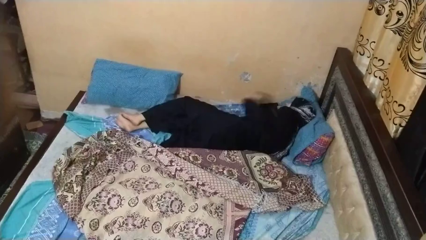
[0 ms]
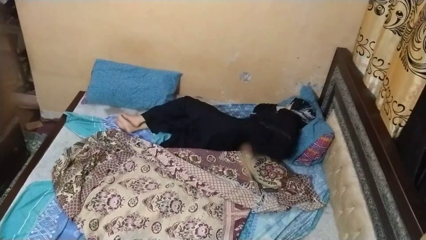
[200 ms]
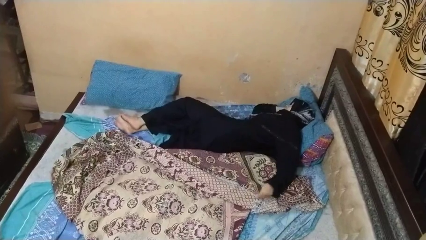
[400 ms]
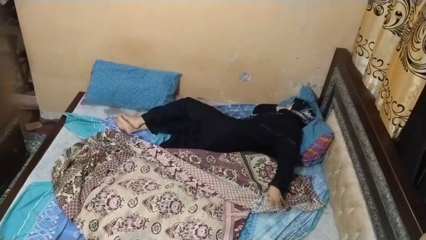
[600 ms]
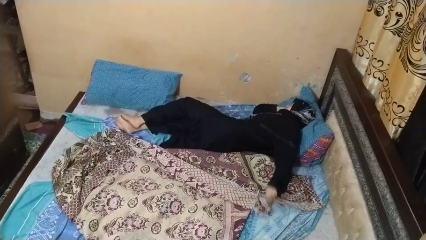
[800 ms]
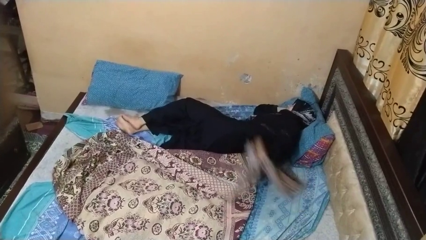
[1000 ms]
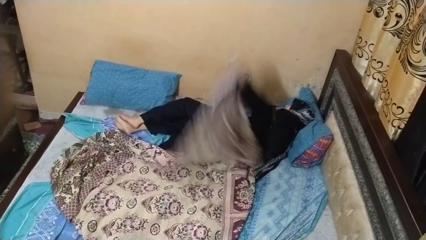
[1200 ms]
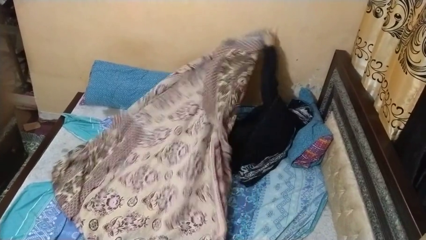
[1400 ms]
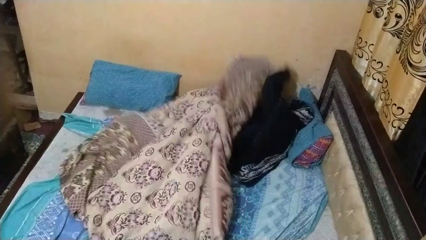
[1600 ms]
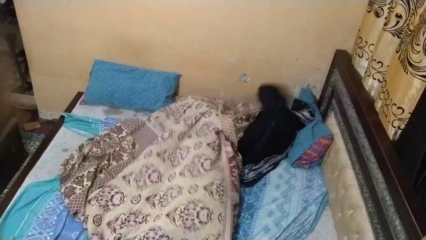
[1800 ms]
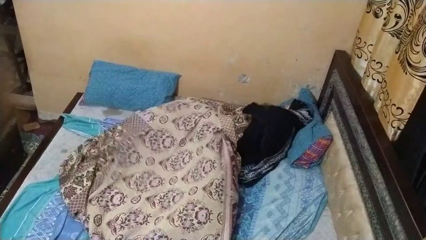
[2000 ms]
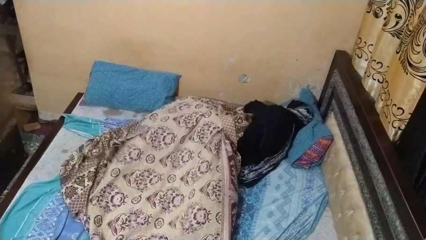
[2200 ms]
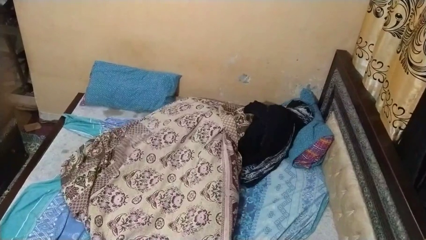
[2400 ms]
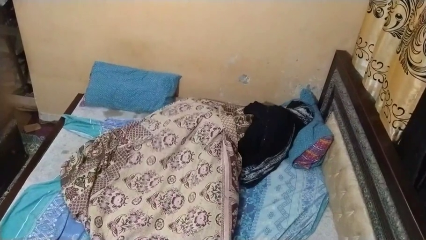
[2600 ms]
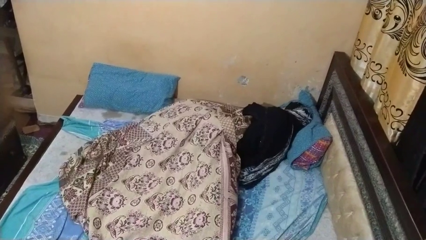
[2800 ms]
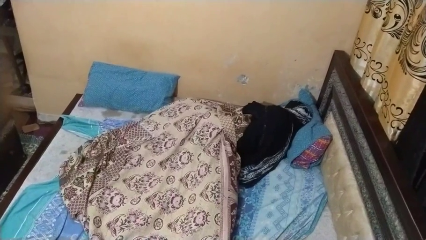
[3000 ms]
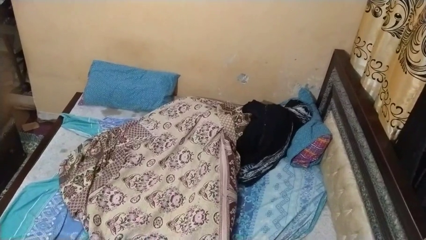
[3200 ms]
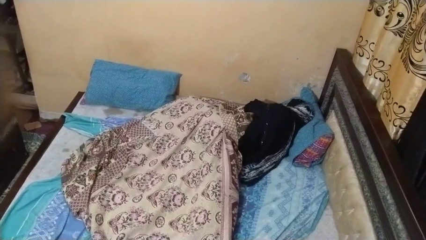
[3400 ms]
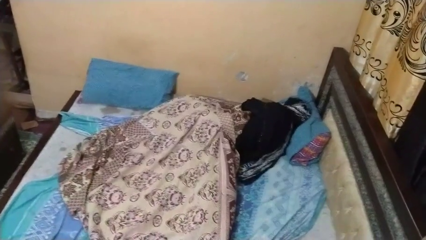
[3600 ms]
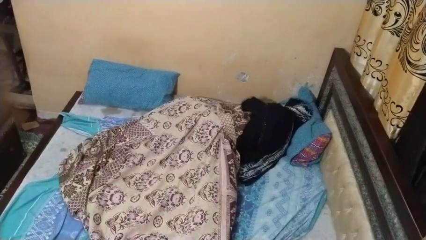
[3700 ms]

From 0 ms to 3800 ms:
person covers with blanket

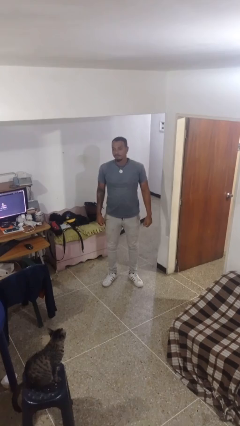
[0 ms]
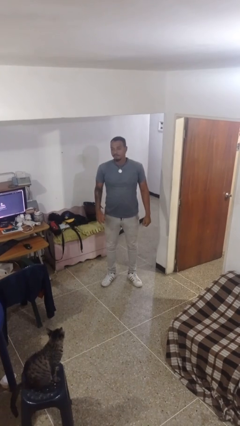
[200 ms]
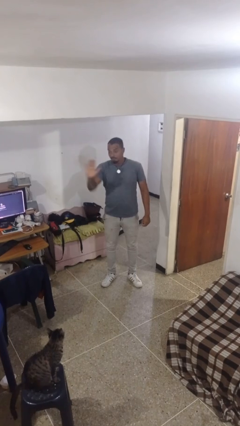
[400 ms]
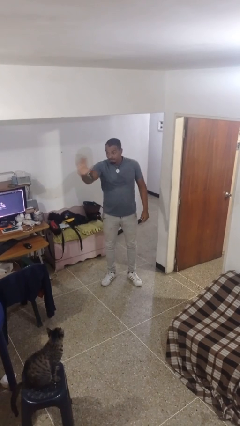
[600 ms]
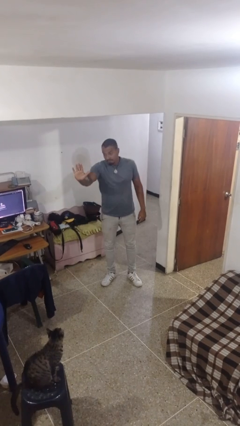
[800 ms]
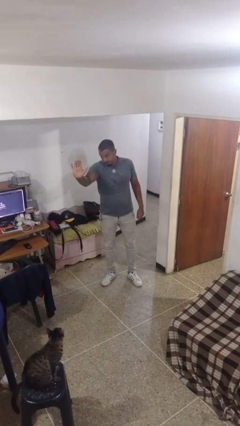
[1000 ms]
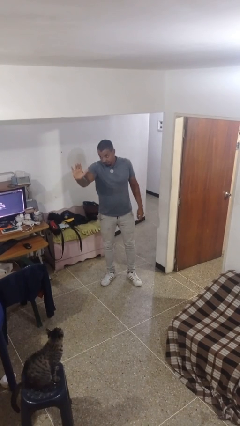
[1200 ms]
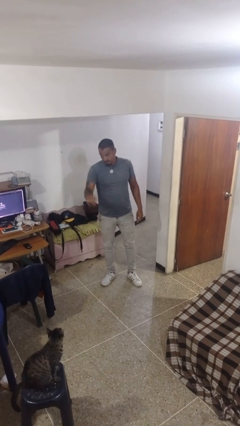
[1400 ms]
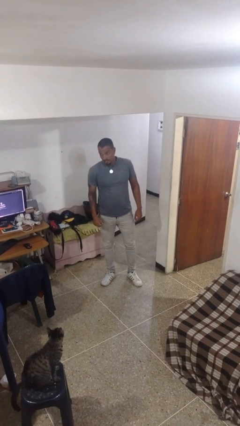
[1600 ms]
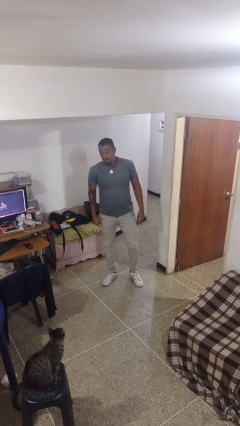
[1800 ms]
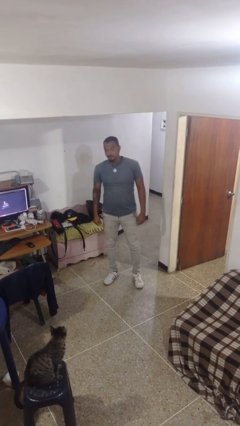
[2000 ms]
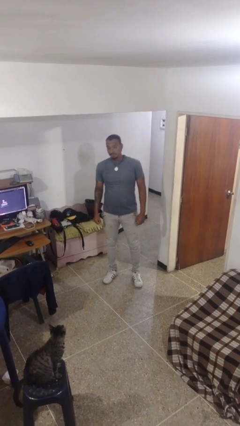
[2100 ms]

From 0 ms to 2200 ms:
person gestures stop

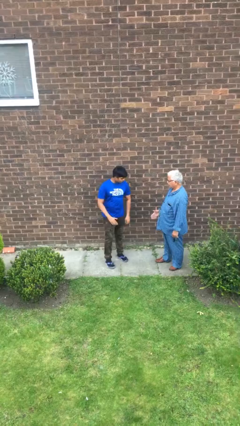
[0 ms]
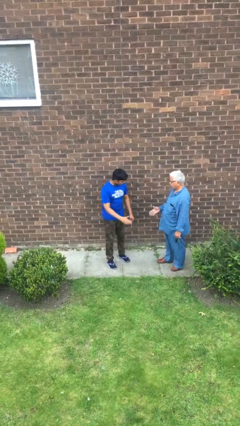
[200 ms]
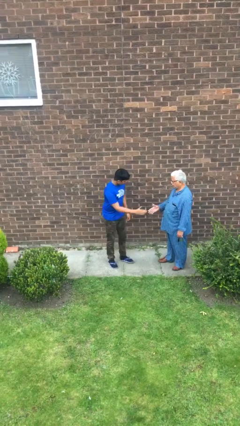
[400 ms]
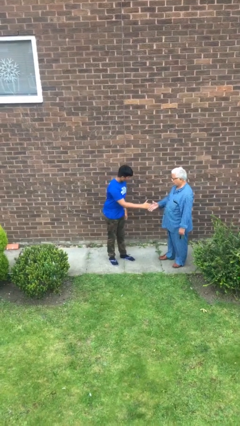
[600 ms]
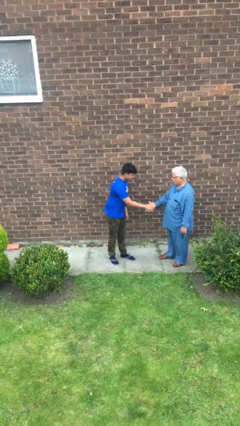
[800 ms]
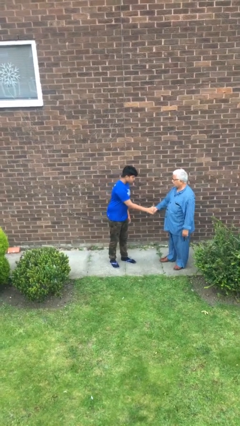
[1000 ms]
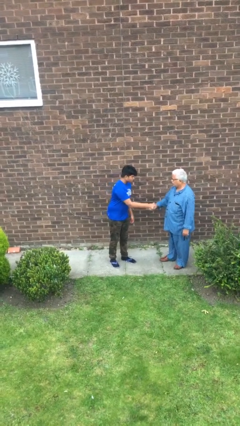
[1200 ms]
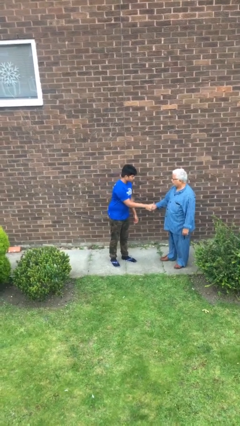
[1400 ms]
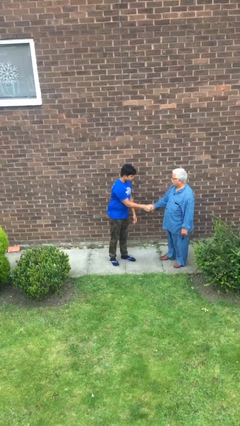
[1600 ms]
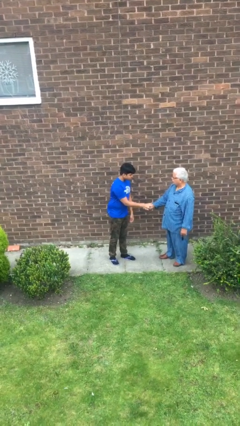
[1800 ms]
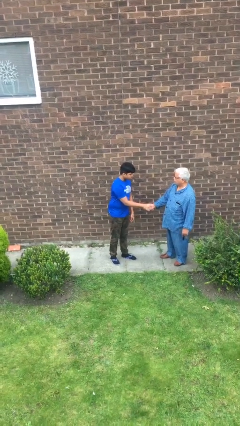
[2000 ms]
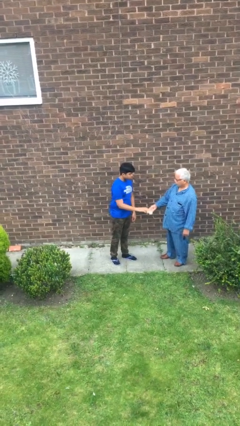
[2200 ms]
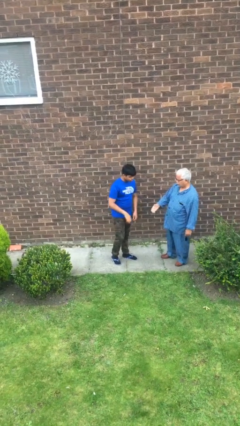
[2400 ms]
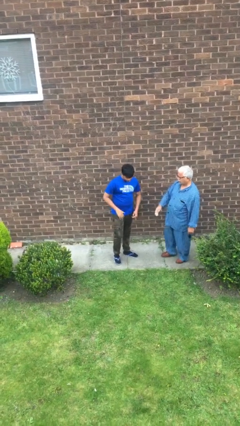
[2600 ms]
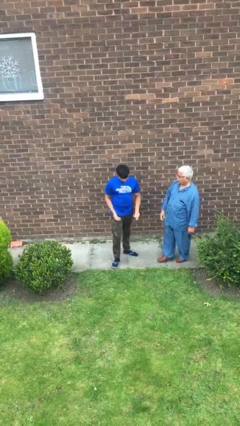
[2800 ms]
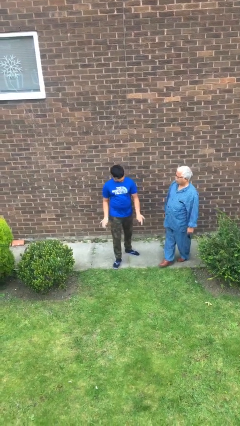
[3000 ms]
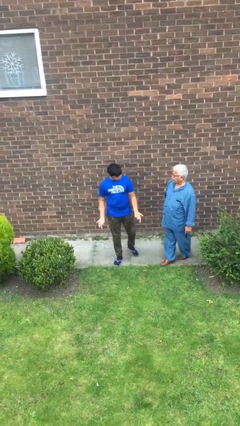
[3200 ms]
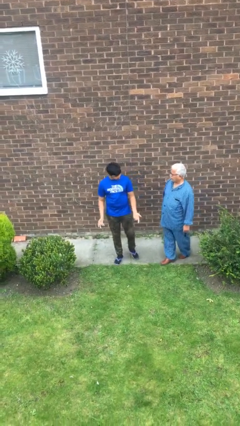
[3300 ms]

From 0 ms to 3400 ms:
person shakes hand

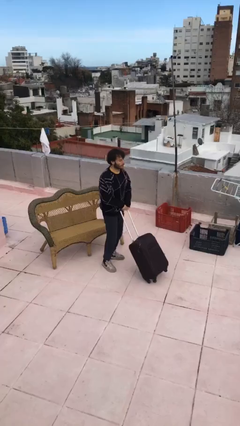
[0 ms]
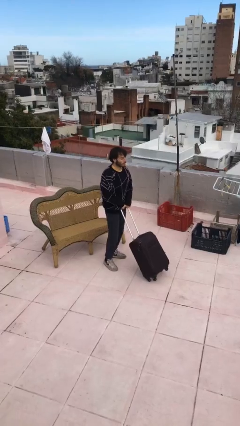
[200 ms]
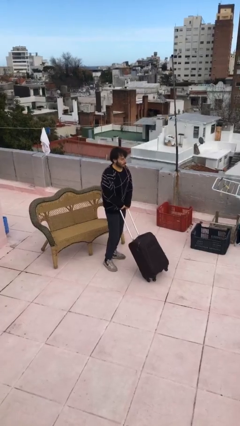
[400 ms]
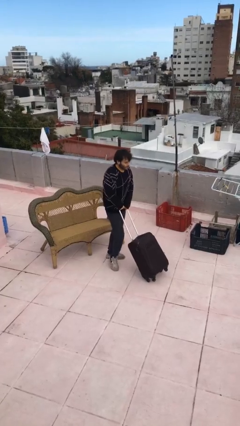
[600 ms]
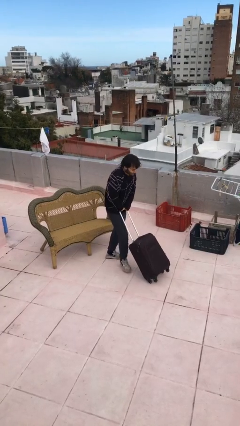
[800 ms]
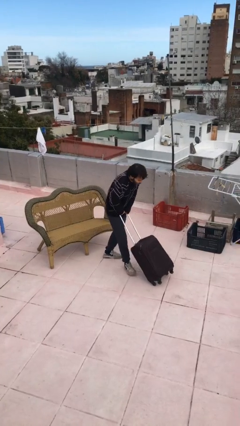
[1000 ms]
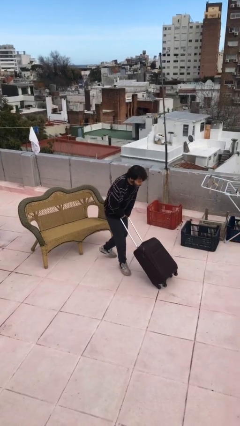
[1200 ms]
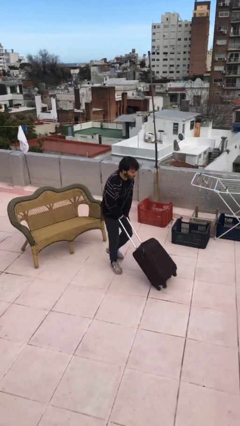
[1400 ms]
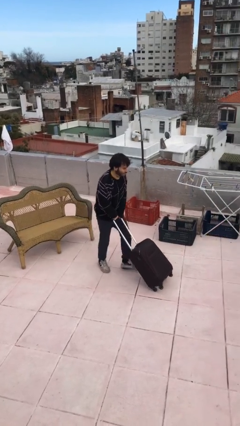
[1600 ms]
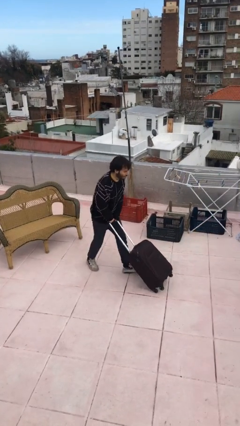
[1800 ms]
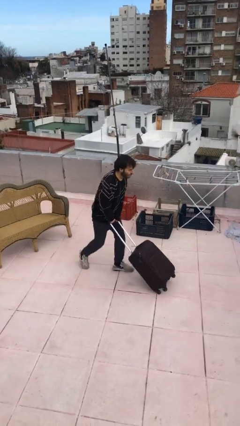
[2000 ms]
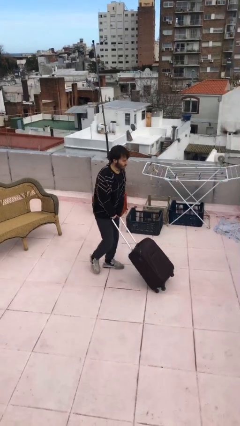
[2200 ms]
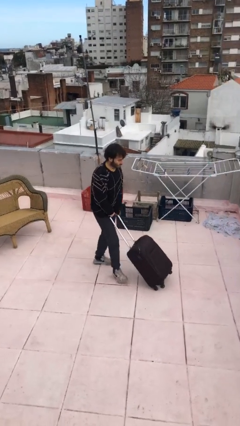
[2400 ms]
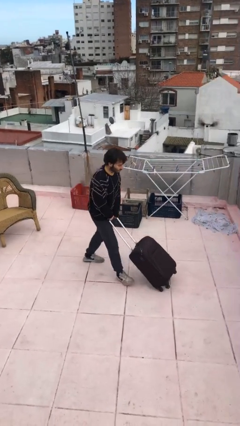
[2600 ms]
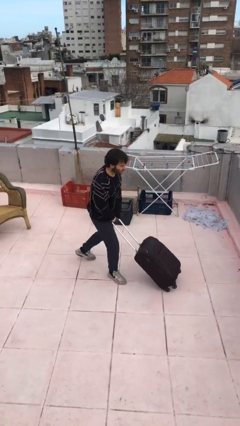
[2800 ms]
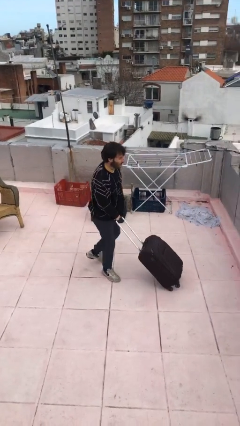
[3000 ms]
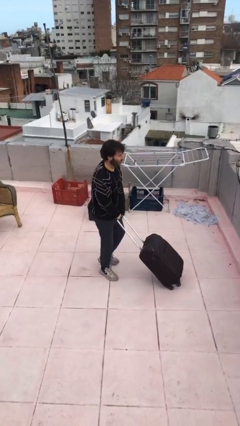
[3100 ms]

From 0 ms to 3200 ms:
person pushes wheeled cart

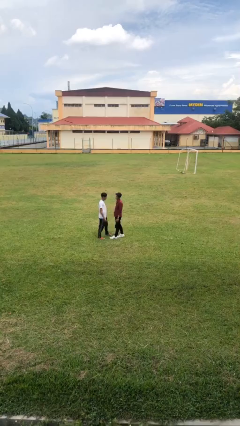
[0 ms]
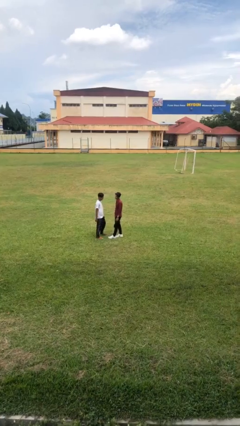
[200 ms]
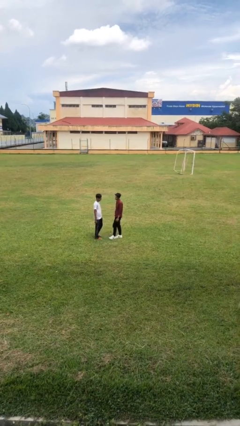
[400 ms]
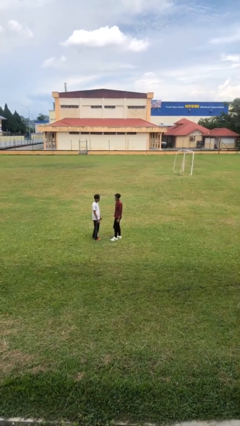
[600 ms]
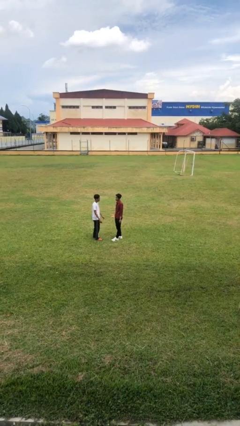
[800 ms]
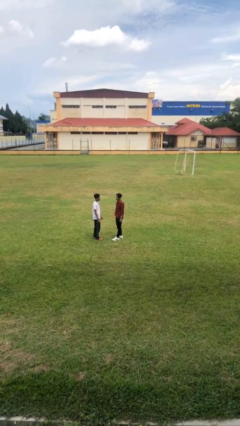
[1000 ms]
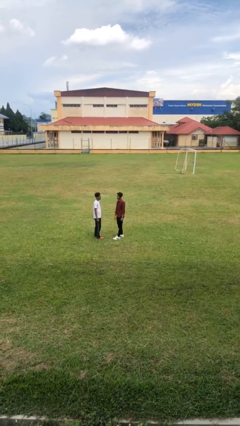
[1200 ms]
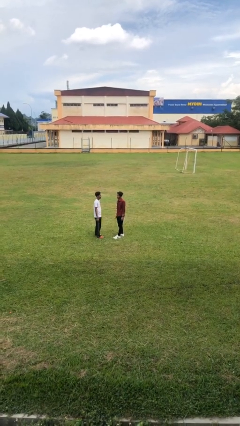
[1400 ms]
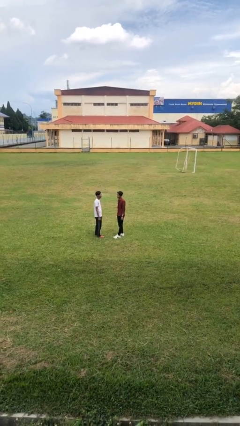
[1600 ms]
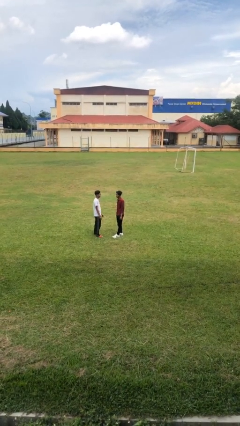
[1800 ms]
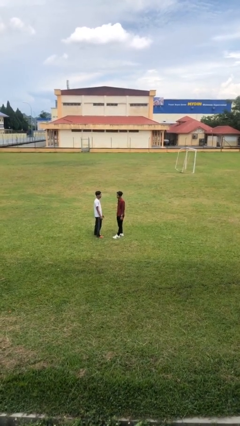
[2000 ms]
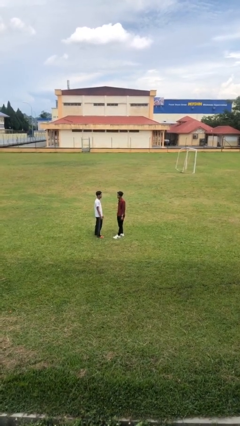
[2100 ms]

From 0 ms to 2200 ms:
person talks to person

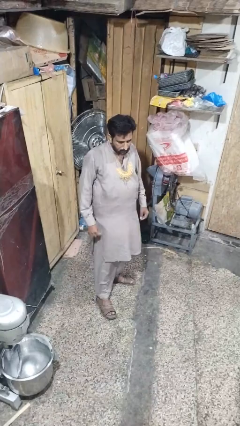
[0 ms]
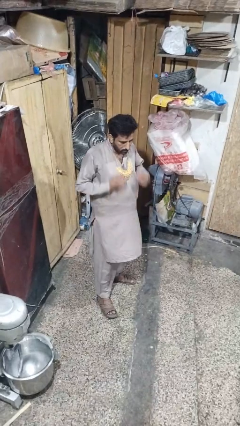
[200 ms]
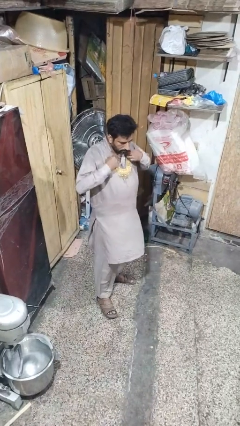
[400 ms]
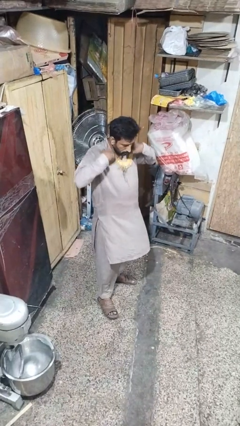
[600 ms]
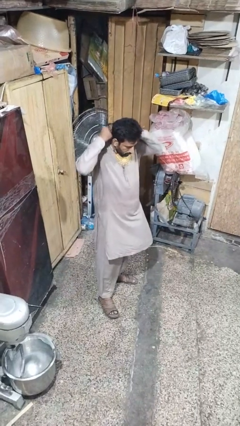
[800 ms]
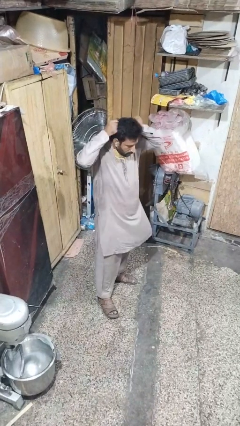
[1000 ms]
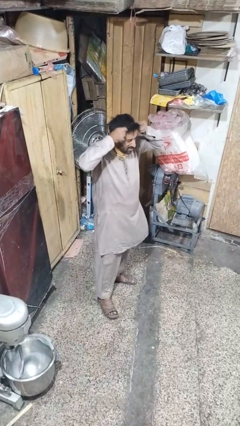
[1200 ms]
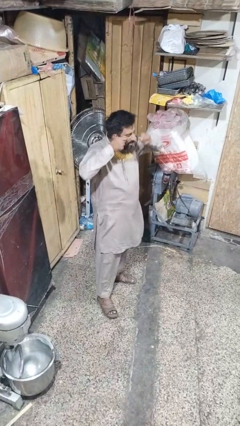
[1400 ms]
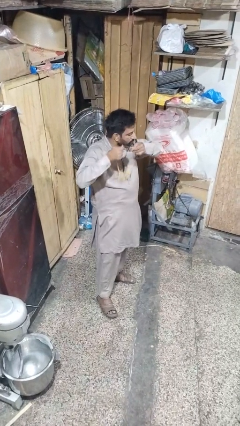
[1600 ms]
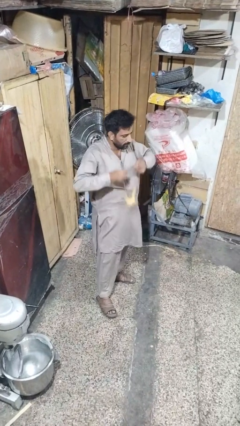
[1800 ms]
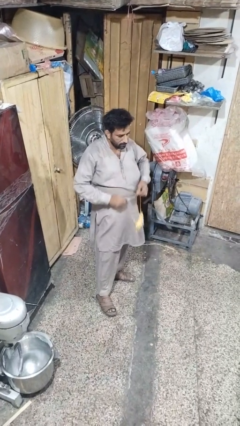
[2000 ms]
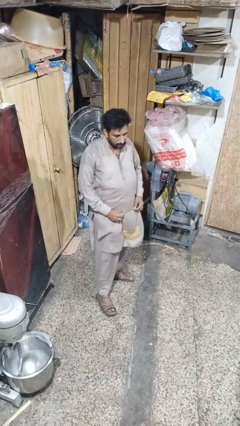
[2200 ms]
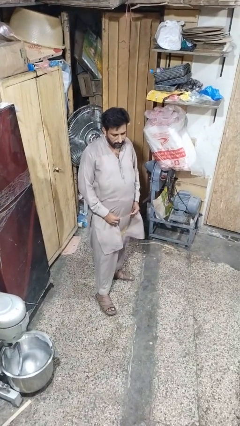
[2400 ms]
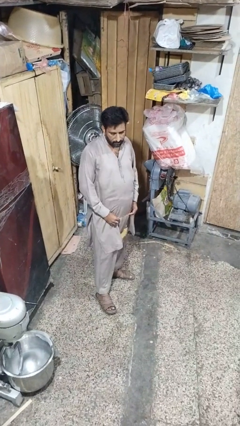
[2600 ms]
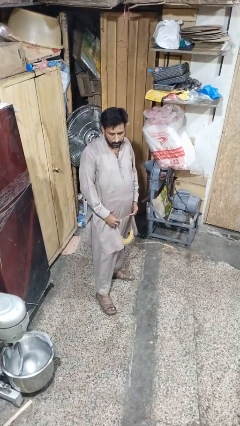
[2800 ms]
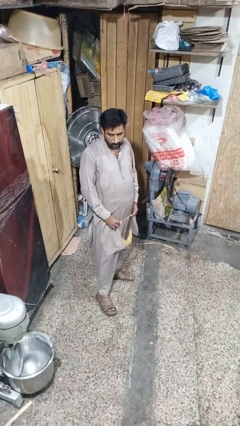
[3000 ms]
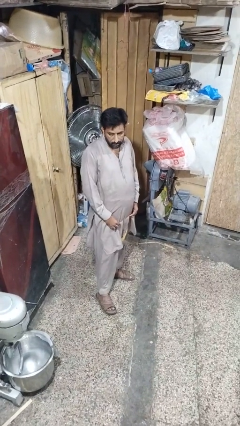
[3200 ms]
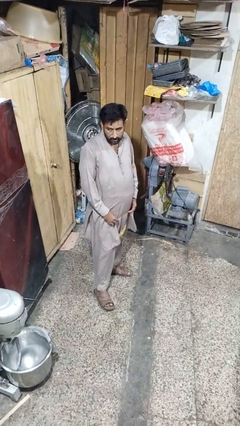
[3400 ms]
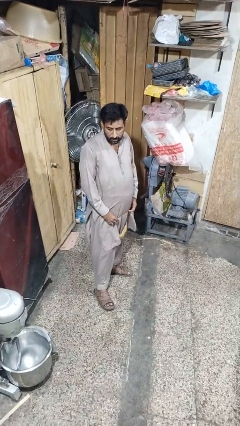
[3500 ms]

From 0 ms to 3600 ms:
person takes off necklace
